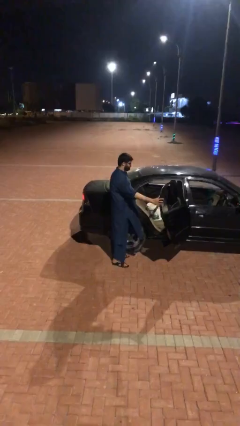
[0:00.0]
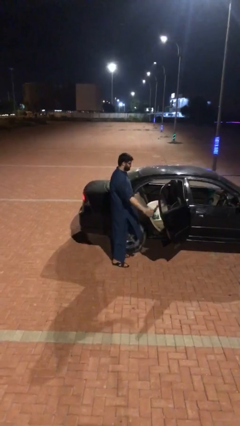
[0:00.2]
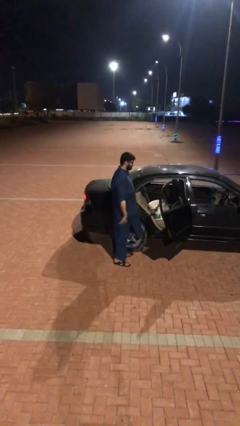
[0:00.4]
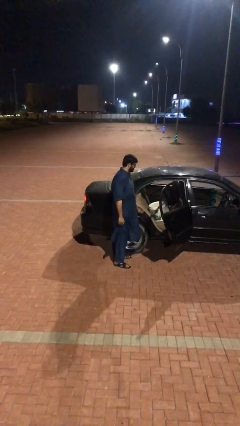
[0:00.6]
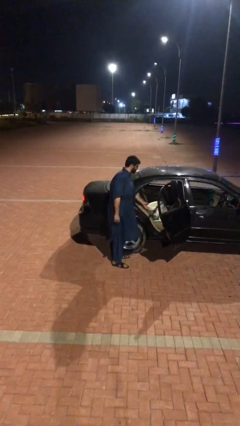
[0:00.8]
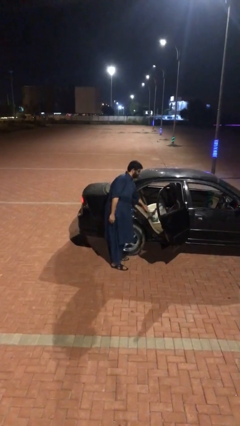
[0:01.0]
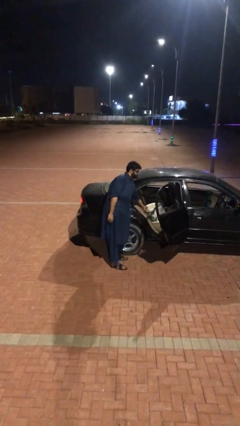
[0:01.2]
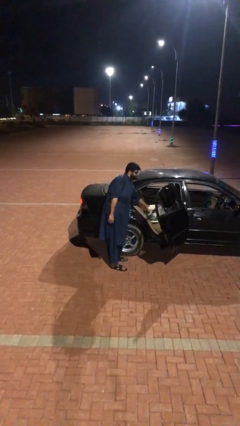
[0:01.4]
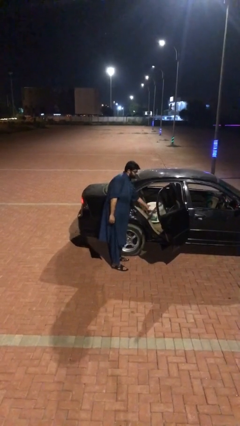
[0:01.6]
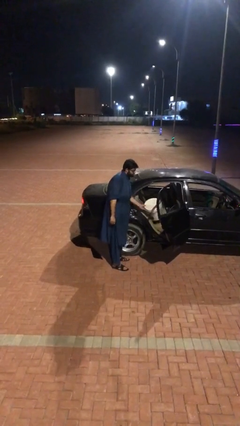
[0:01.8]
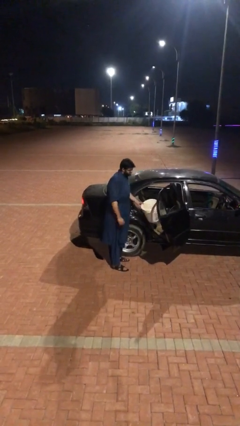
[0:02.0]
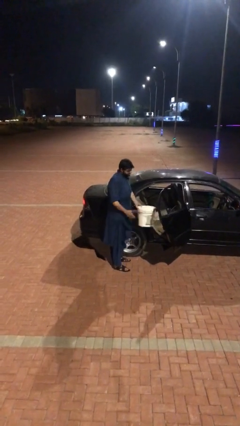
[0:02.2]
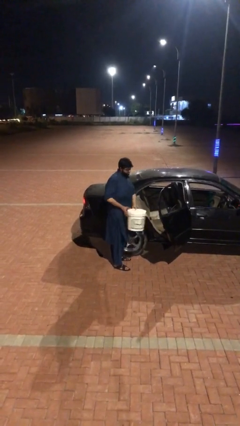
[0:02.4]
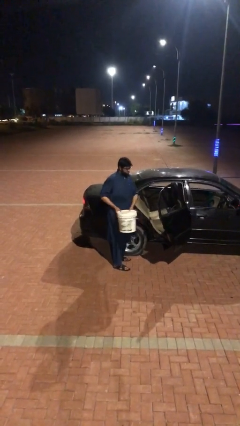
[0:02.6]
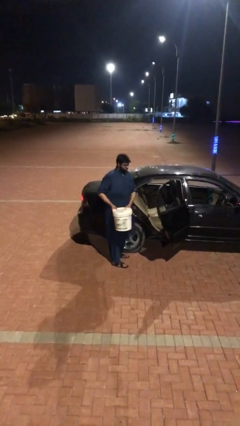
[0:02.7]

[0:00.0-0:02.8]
person unloads car

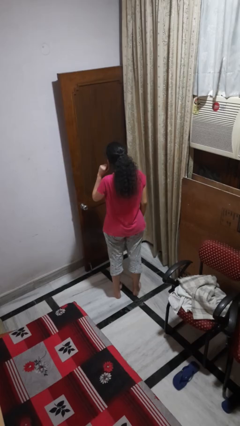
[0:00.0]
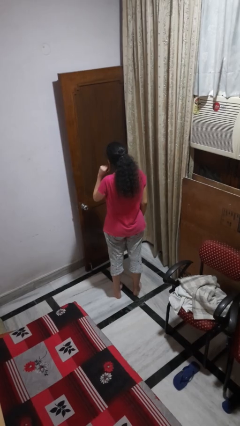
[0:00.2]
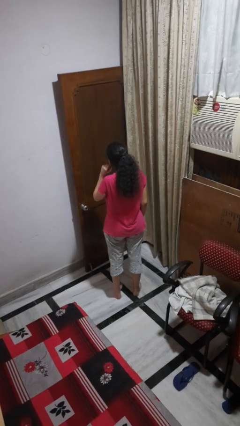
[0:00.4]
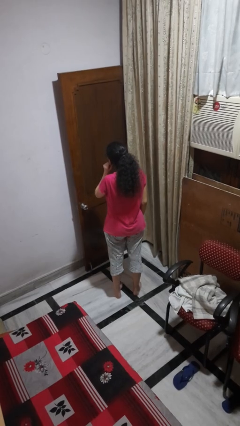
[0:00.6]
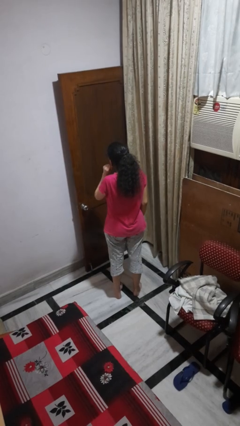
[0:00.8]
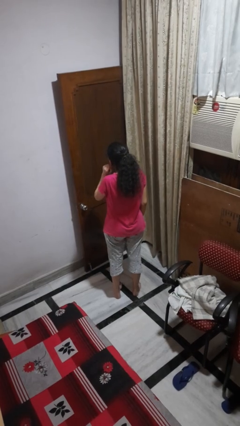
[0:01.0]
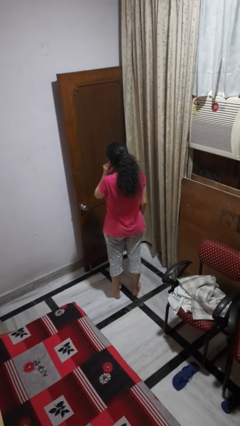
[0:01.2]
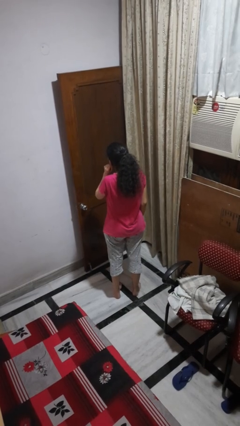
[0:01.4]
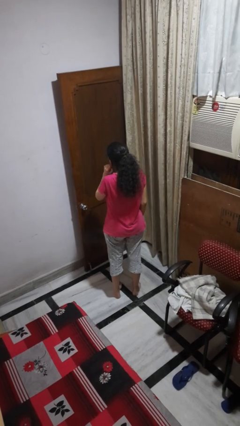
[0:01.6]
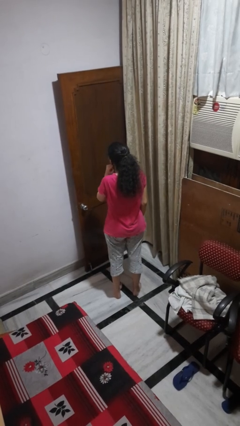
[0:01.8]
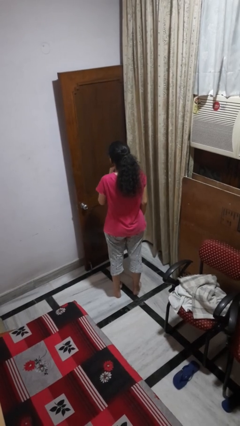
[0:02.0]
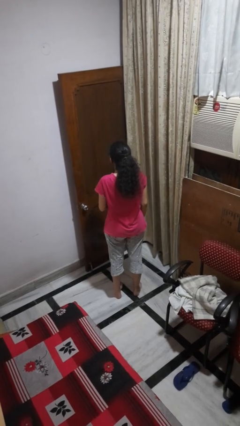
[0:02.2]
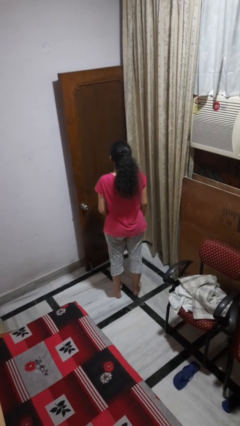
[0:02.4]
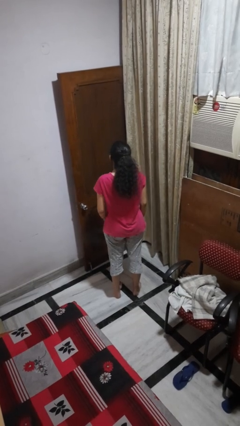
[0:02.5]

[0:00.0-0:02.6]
person touches earlobe

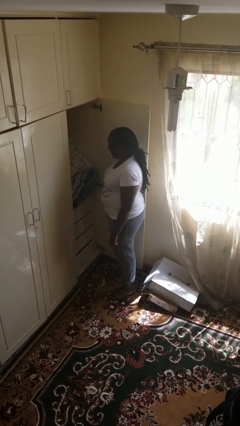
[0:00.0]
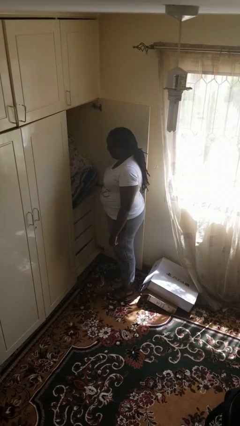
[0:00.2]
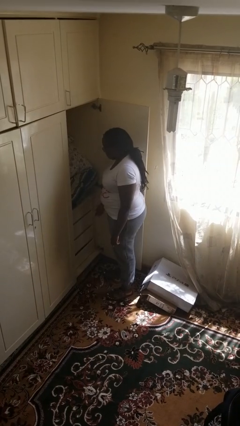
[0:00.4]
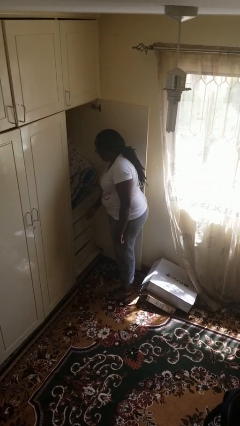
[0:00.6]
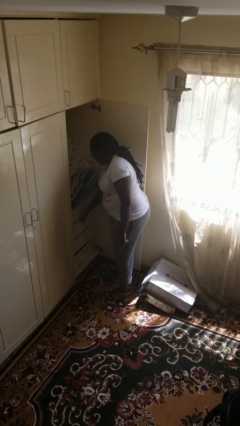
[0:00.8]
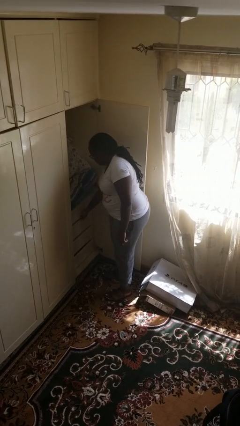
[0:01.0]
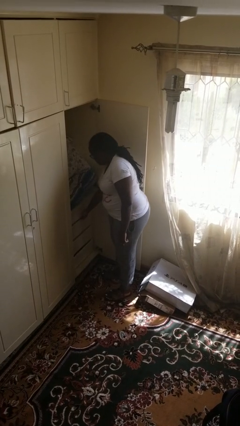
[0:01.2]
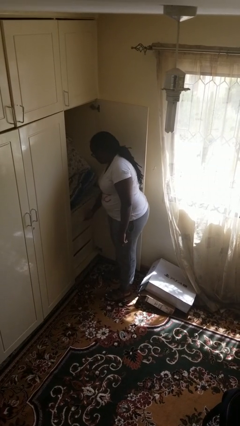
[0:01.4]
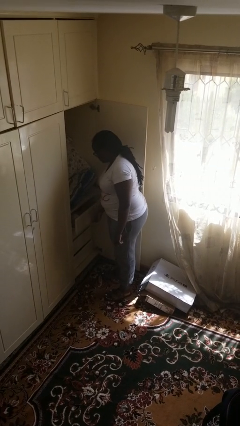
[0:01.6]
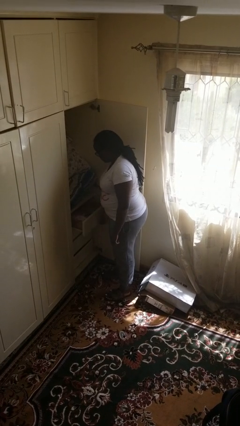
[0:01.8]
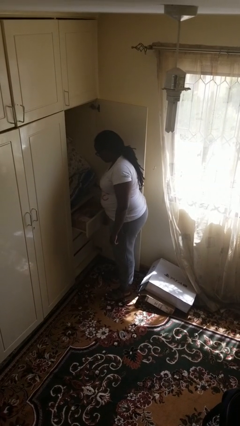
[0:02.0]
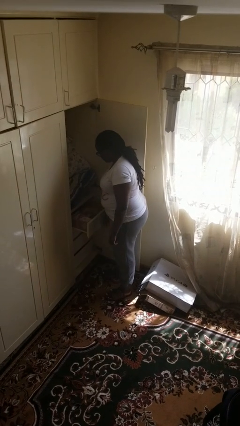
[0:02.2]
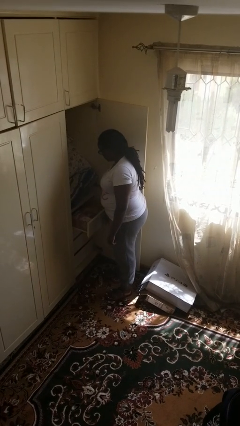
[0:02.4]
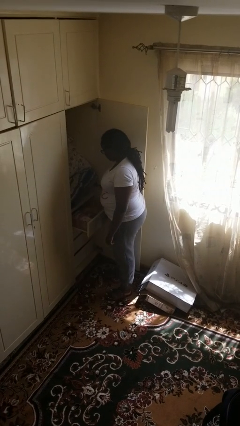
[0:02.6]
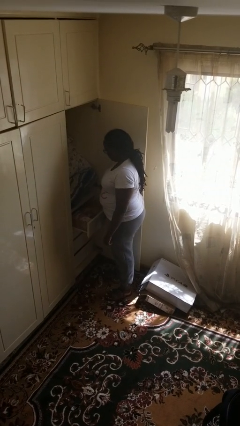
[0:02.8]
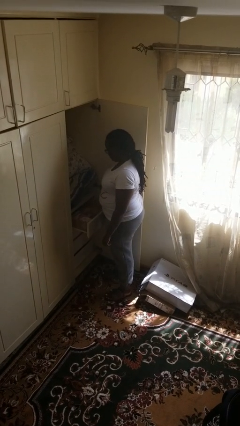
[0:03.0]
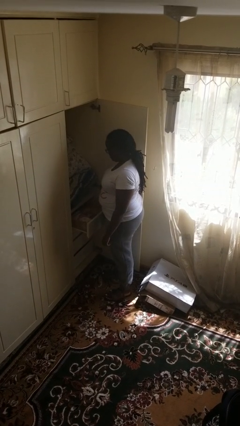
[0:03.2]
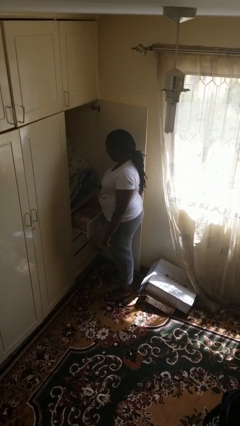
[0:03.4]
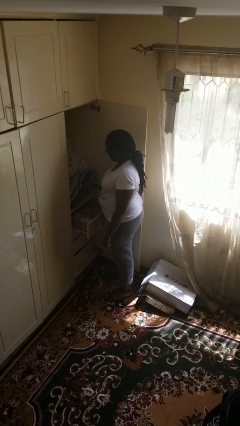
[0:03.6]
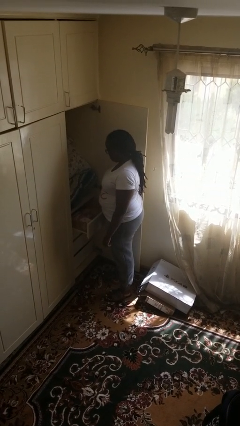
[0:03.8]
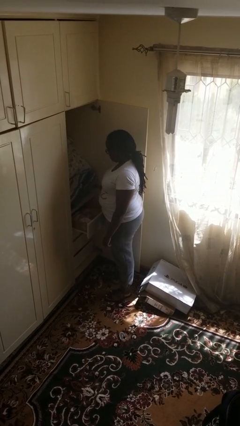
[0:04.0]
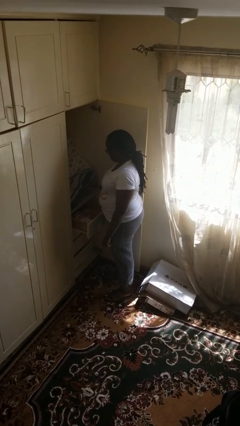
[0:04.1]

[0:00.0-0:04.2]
person opens dresser drawer

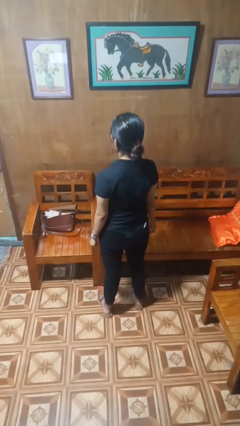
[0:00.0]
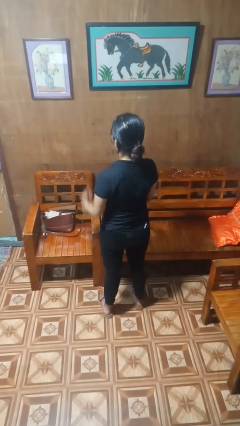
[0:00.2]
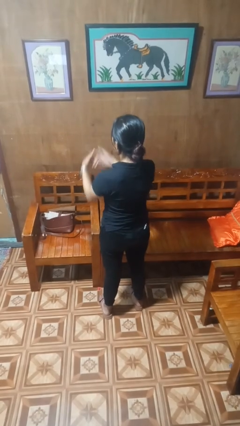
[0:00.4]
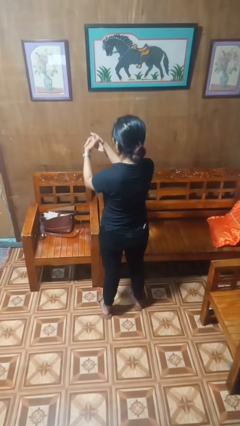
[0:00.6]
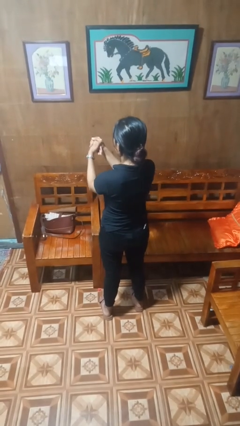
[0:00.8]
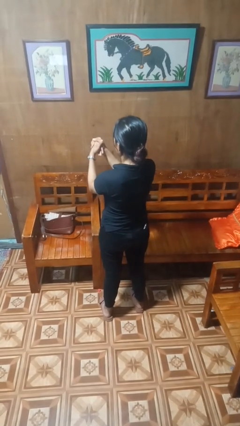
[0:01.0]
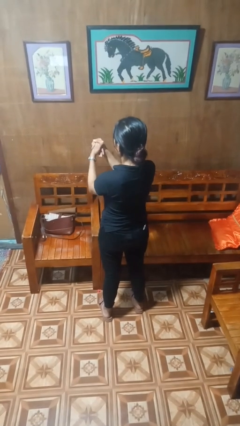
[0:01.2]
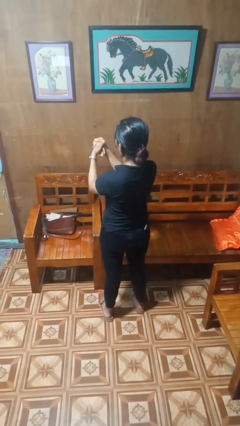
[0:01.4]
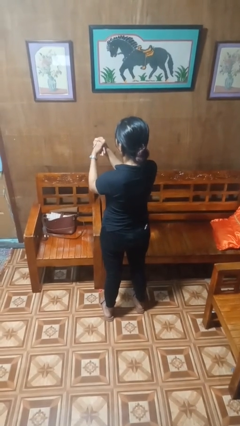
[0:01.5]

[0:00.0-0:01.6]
person cracks knuckles

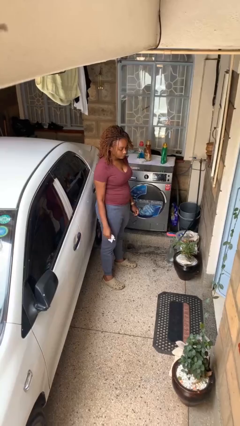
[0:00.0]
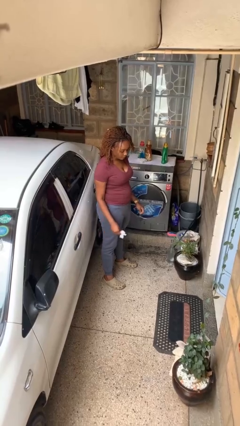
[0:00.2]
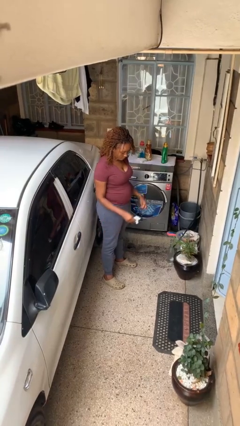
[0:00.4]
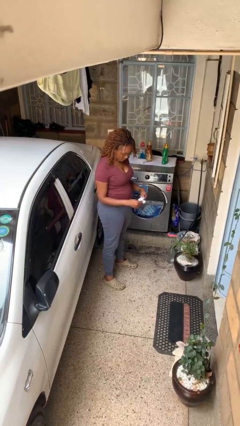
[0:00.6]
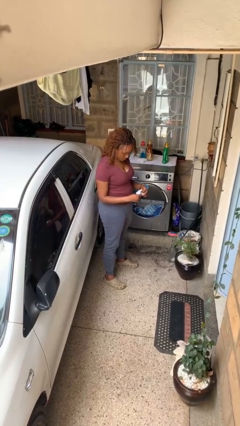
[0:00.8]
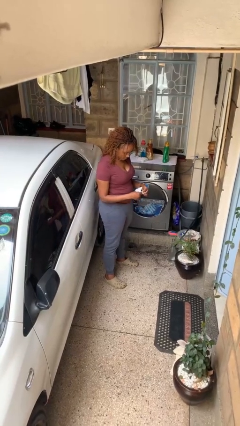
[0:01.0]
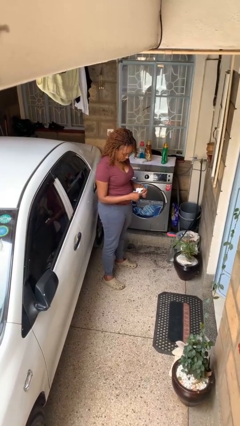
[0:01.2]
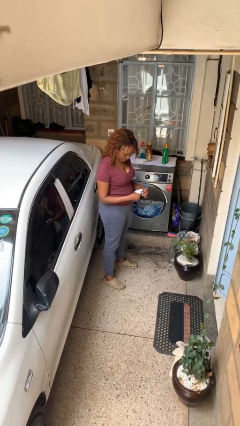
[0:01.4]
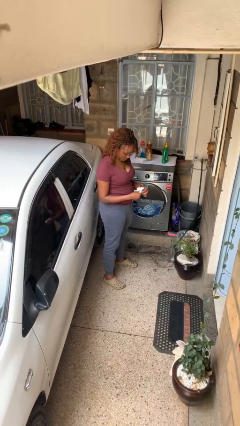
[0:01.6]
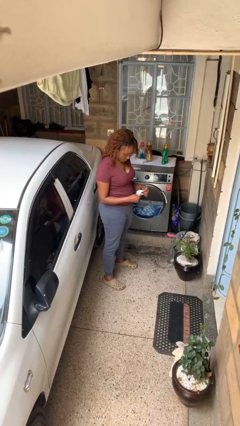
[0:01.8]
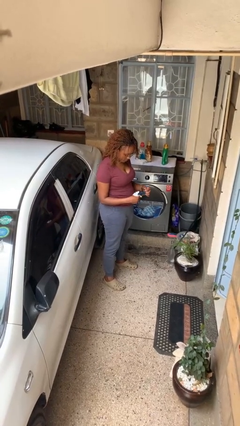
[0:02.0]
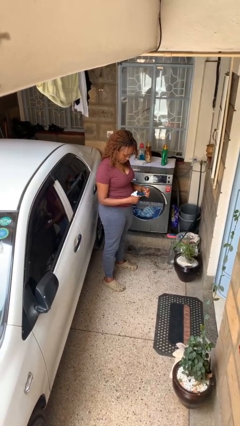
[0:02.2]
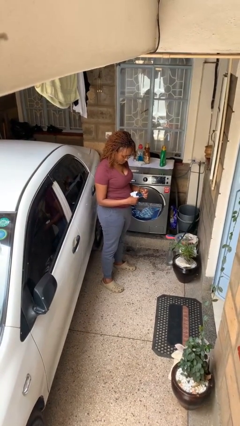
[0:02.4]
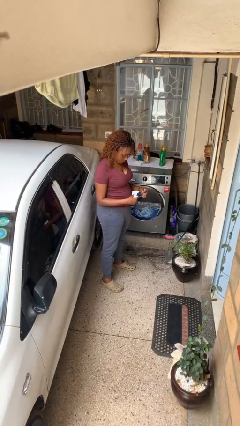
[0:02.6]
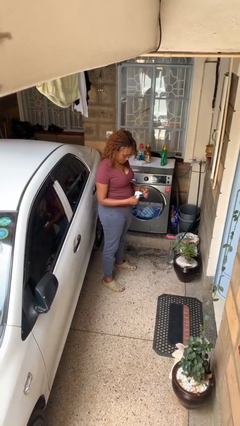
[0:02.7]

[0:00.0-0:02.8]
person cleans eyeglasses

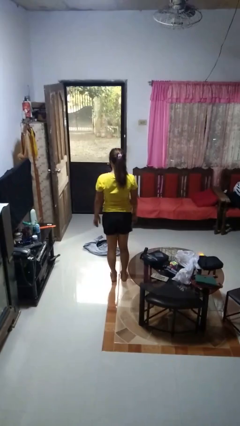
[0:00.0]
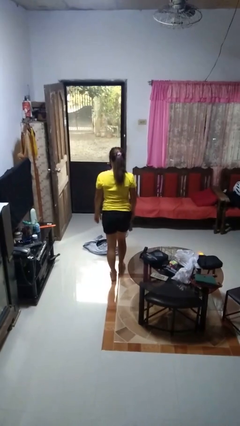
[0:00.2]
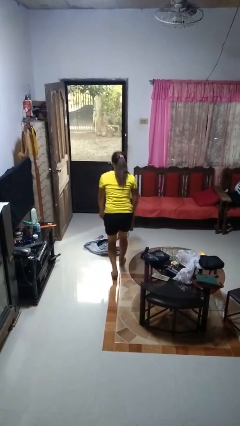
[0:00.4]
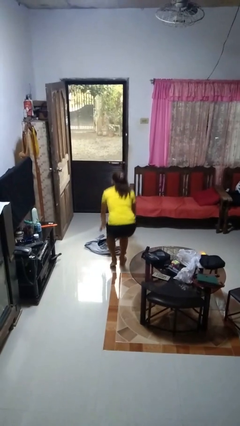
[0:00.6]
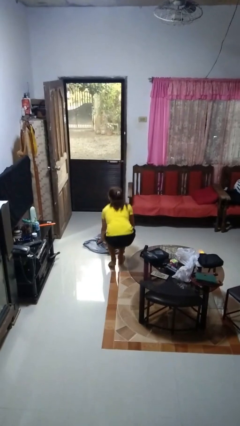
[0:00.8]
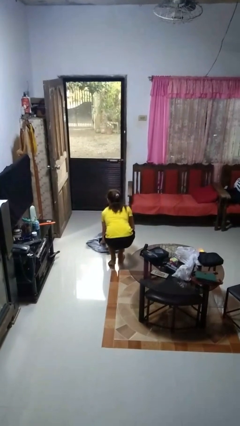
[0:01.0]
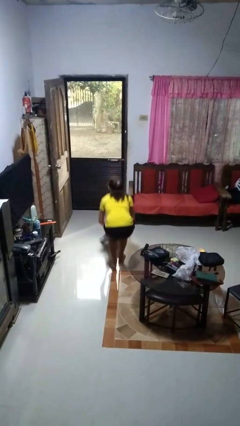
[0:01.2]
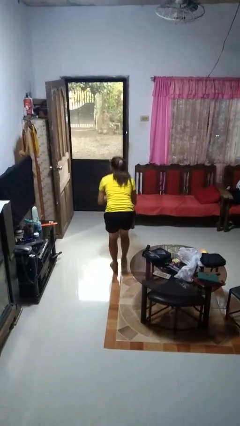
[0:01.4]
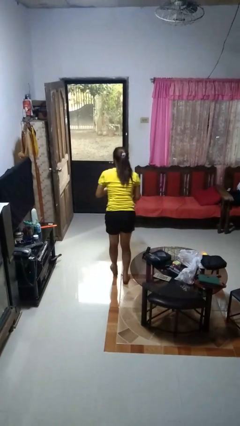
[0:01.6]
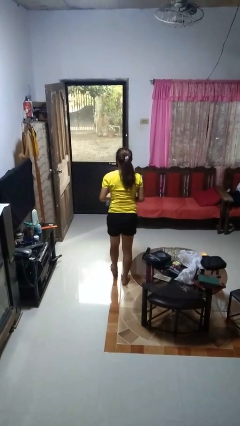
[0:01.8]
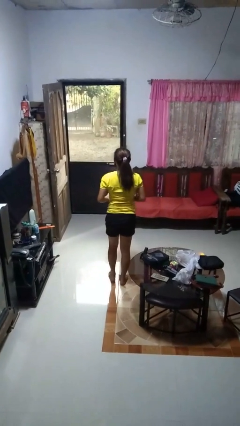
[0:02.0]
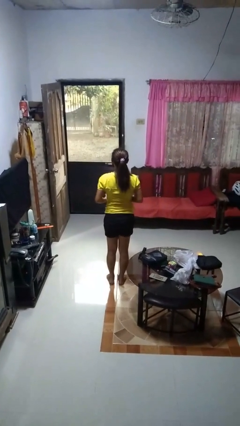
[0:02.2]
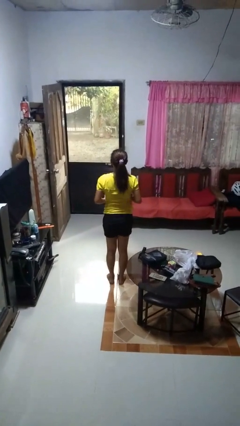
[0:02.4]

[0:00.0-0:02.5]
person picks up object from floor

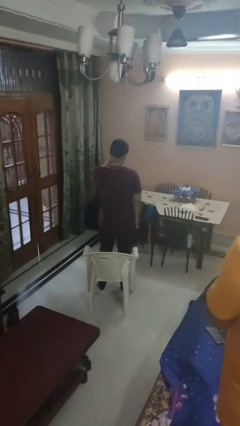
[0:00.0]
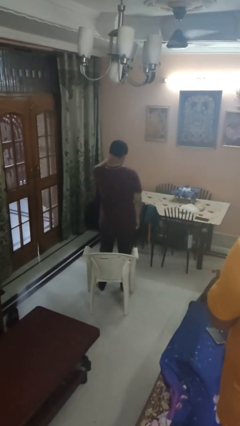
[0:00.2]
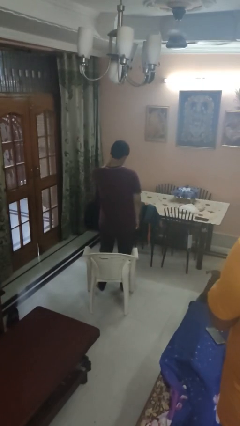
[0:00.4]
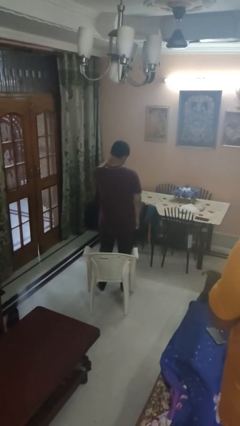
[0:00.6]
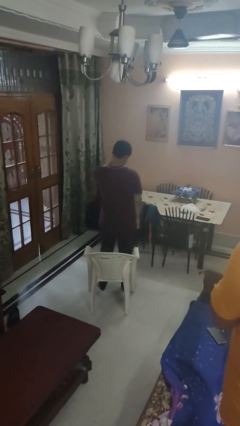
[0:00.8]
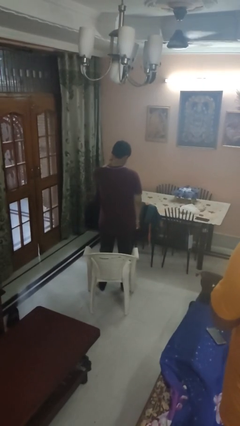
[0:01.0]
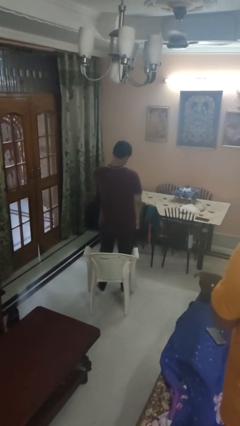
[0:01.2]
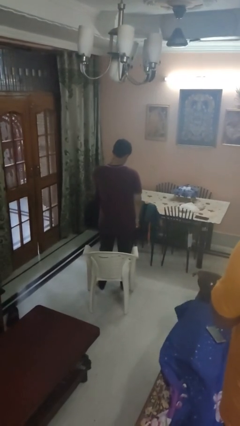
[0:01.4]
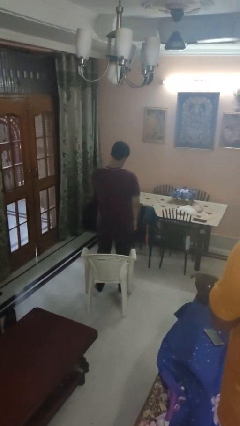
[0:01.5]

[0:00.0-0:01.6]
person rubs neck
